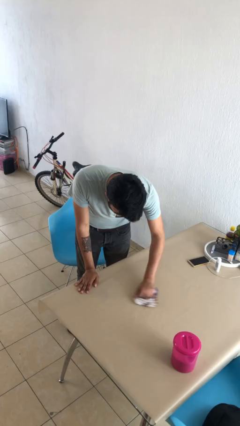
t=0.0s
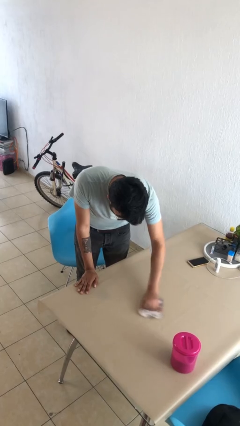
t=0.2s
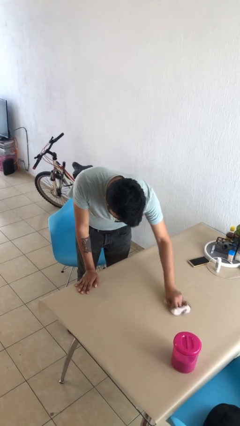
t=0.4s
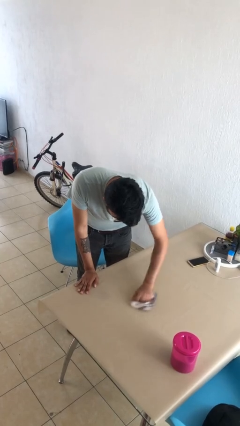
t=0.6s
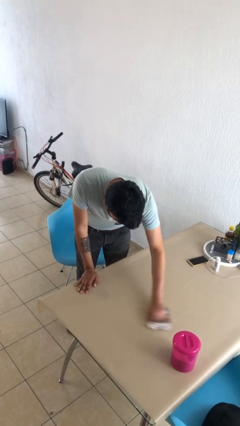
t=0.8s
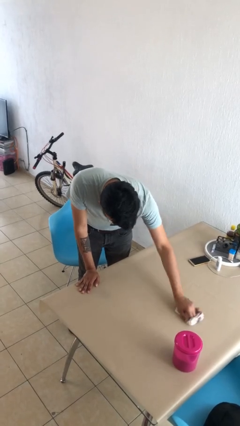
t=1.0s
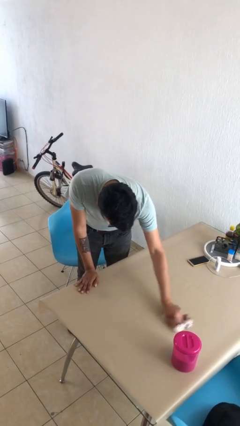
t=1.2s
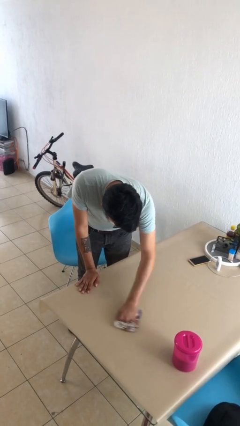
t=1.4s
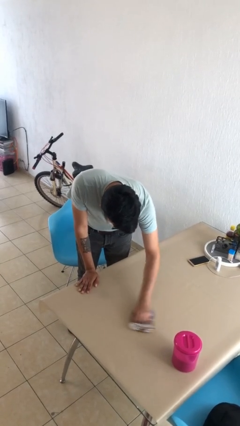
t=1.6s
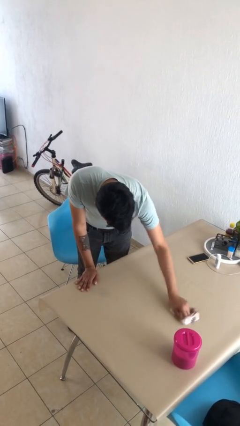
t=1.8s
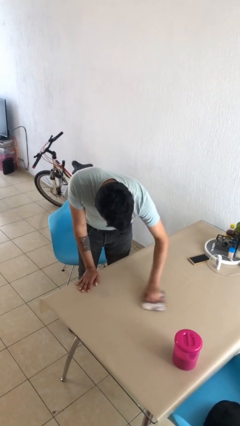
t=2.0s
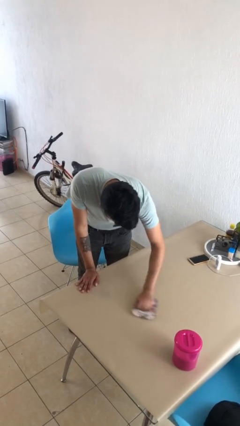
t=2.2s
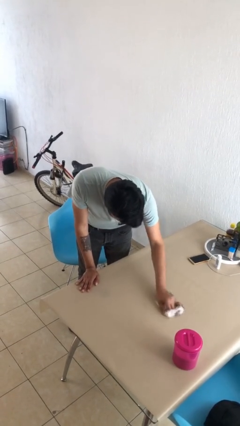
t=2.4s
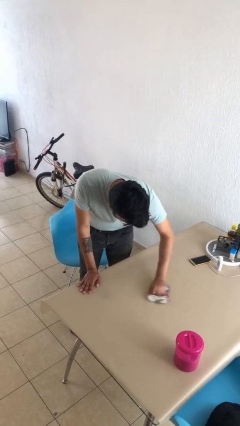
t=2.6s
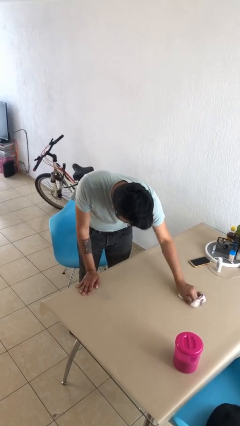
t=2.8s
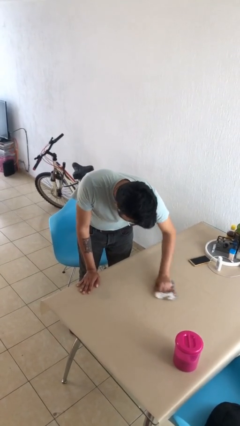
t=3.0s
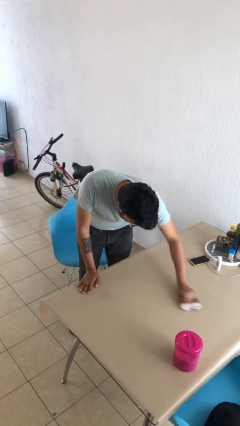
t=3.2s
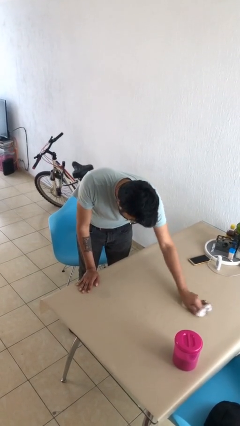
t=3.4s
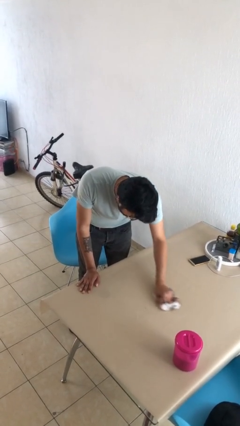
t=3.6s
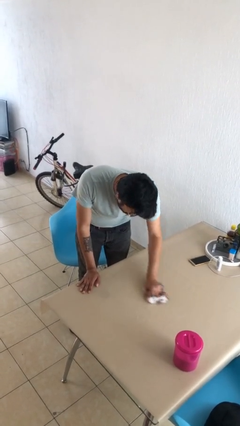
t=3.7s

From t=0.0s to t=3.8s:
person cleans table with rag

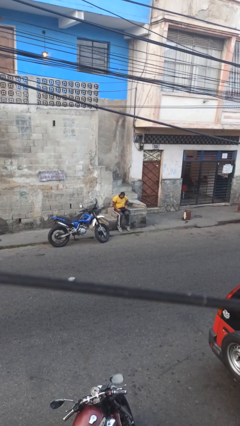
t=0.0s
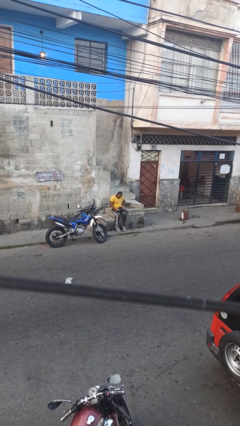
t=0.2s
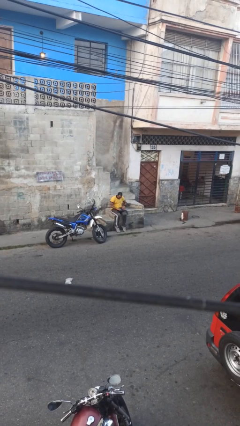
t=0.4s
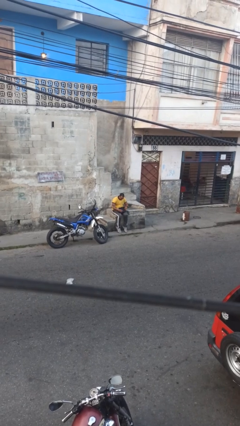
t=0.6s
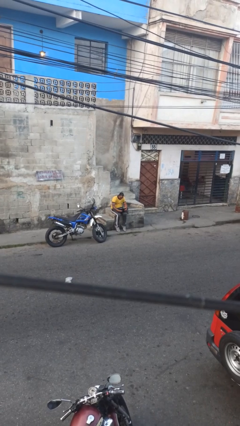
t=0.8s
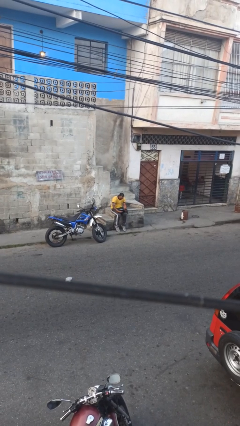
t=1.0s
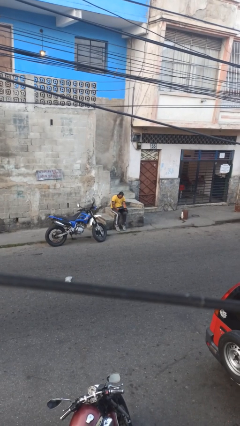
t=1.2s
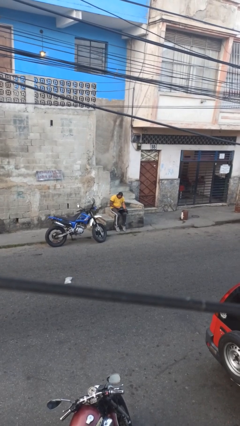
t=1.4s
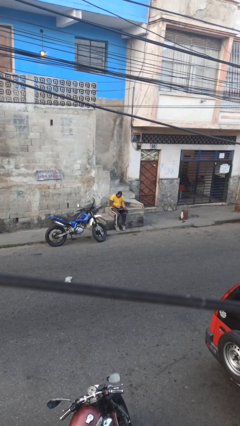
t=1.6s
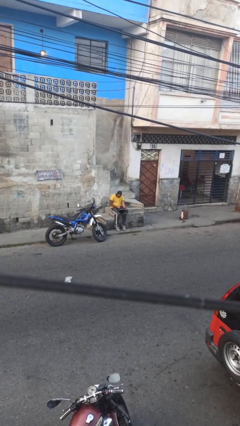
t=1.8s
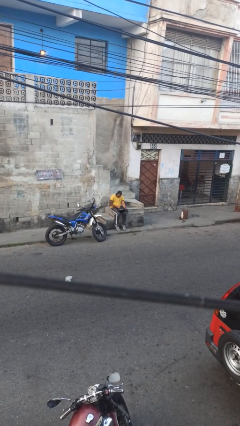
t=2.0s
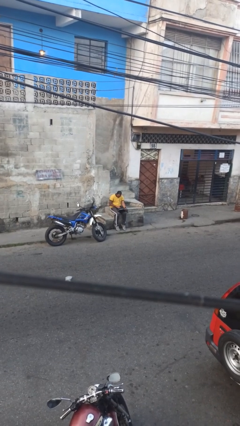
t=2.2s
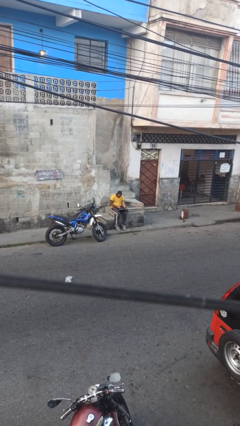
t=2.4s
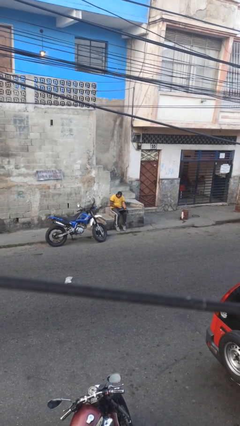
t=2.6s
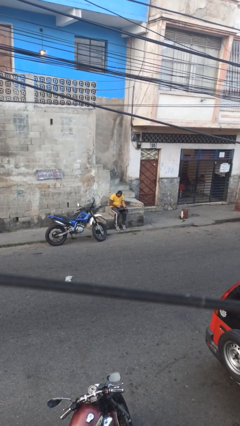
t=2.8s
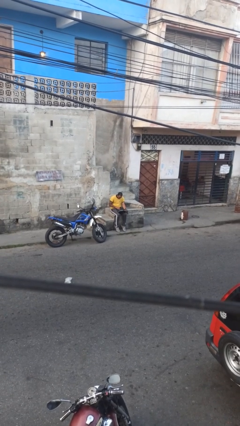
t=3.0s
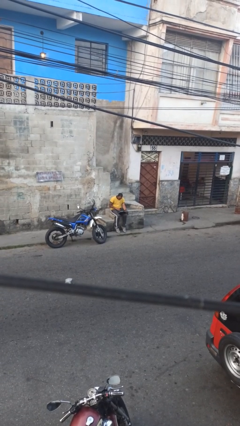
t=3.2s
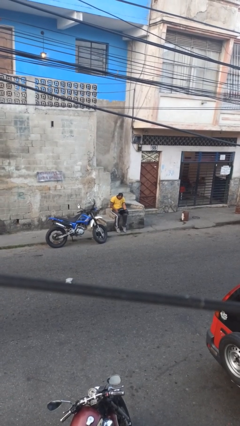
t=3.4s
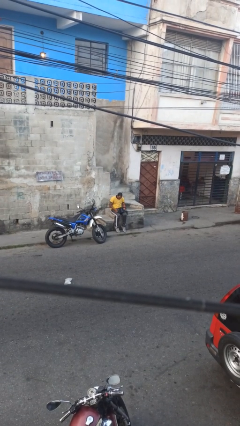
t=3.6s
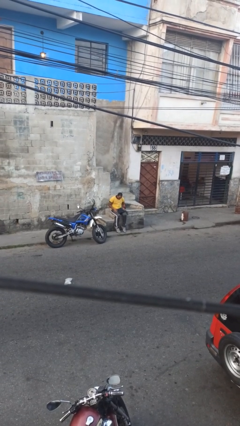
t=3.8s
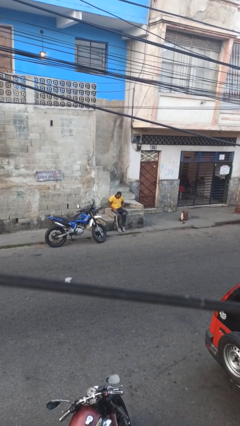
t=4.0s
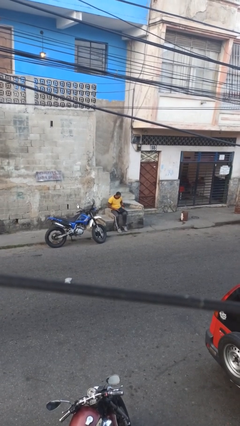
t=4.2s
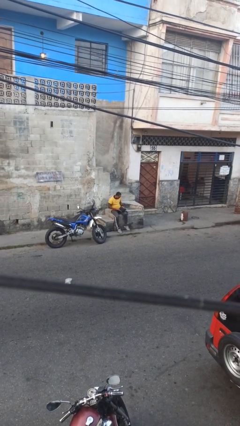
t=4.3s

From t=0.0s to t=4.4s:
person interacts with laptop

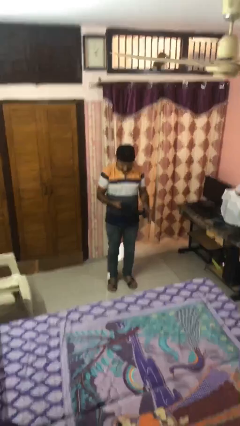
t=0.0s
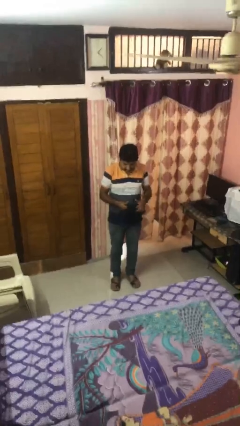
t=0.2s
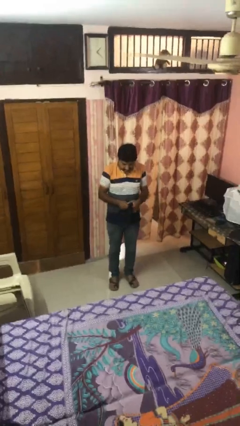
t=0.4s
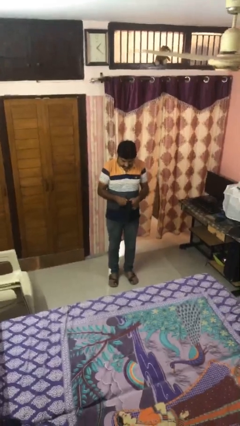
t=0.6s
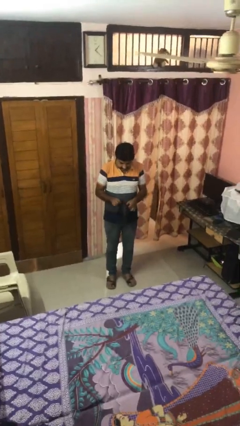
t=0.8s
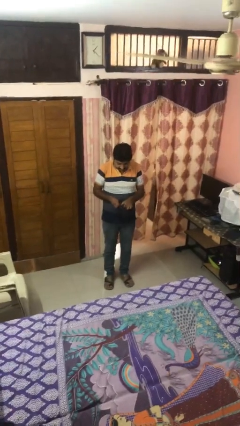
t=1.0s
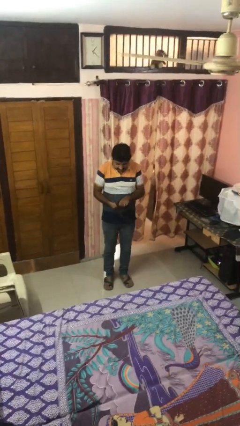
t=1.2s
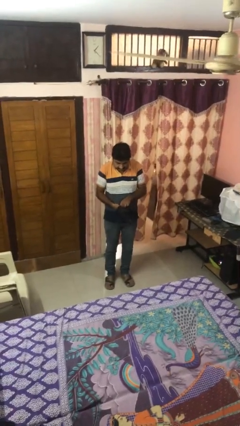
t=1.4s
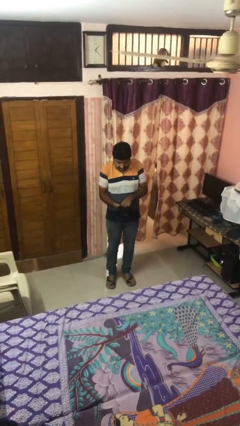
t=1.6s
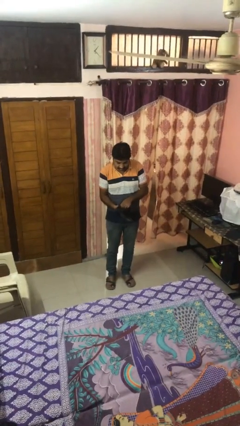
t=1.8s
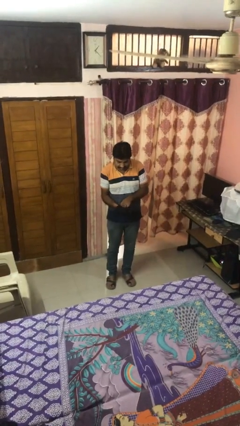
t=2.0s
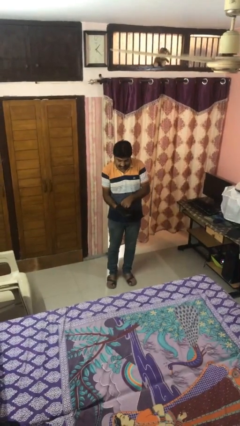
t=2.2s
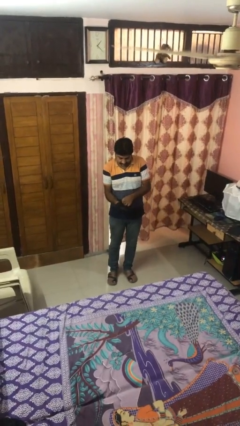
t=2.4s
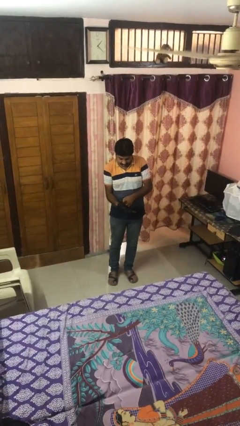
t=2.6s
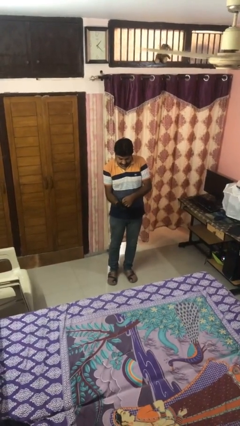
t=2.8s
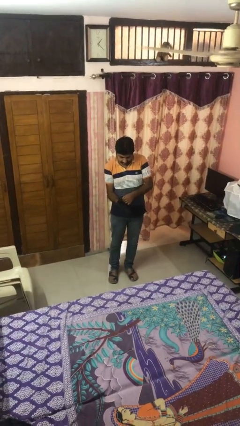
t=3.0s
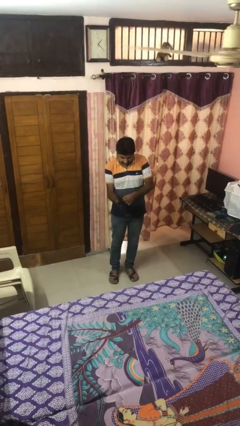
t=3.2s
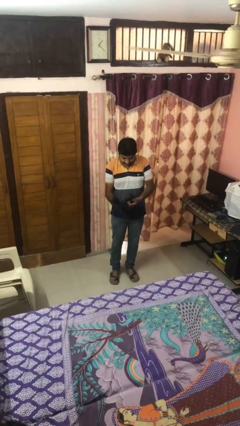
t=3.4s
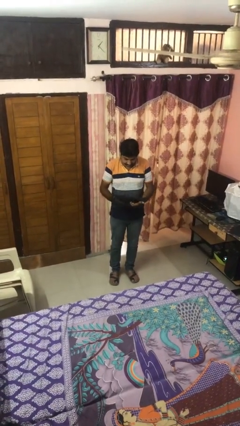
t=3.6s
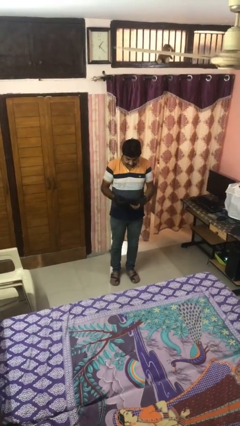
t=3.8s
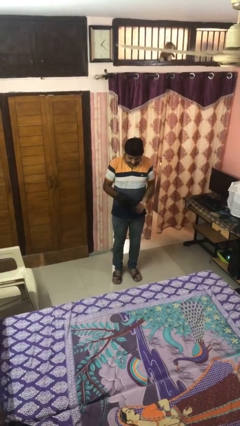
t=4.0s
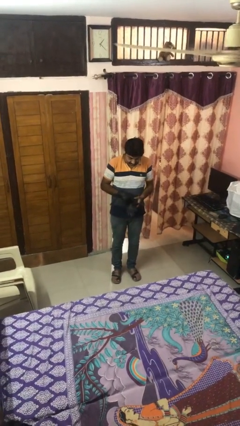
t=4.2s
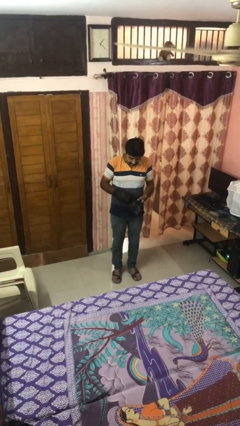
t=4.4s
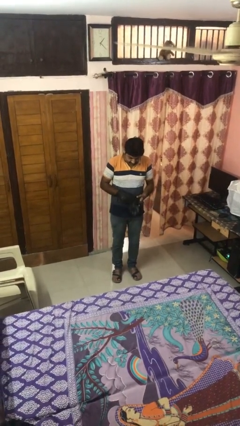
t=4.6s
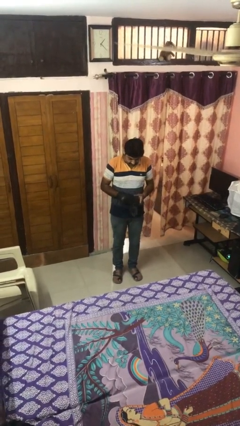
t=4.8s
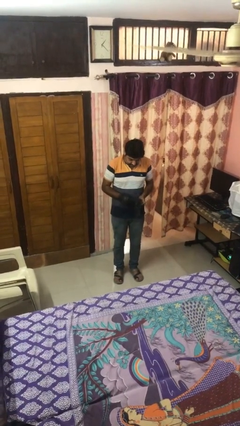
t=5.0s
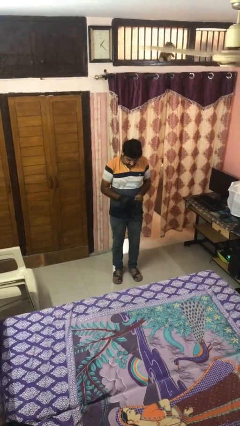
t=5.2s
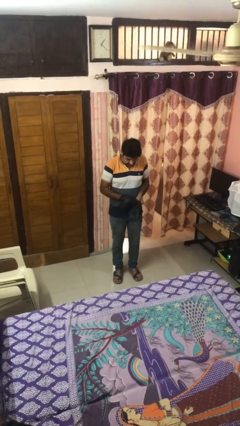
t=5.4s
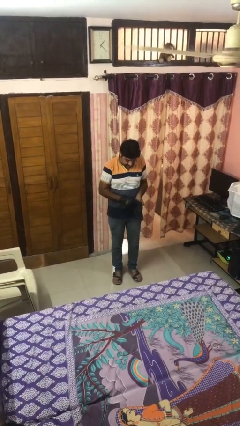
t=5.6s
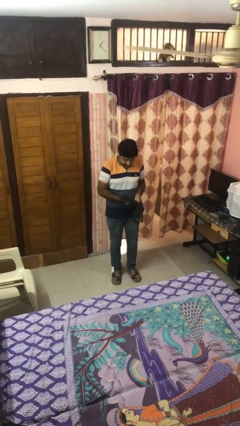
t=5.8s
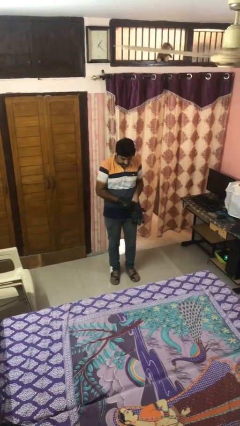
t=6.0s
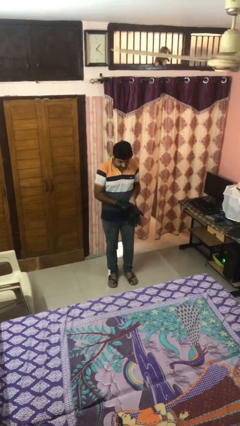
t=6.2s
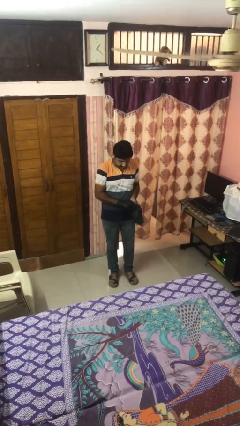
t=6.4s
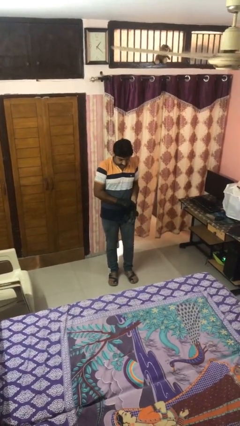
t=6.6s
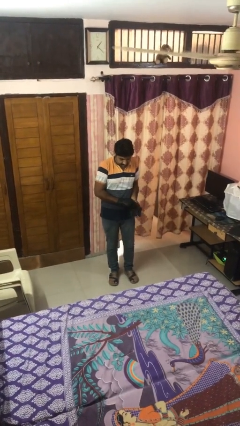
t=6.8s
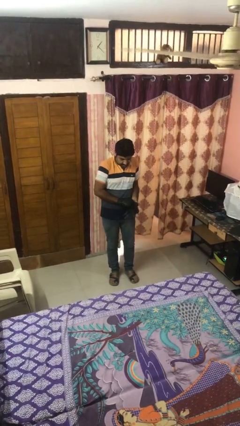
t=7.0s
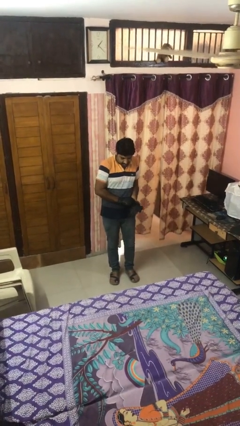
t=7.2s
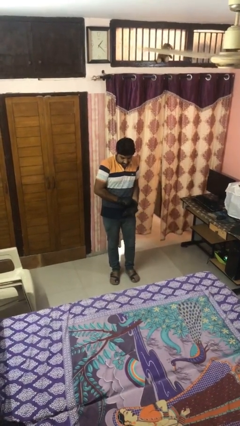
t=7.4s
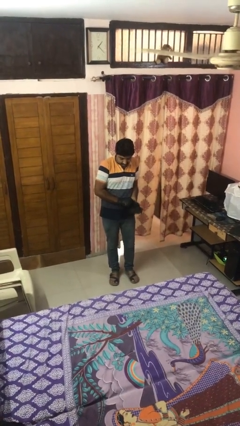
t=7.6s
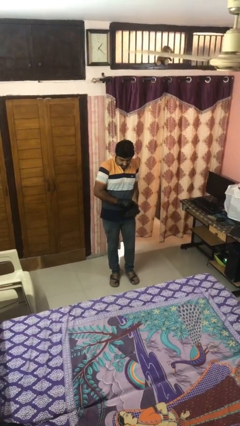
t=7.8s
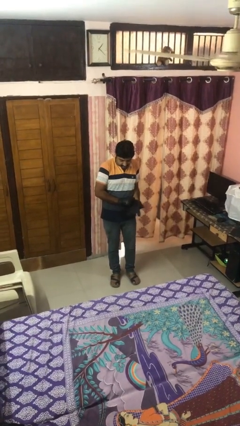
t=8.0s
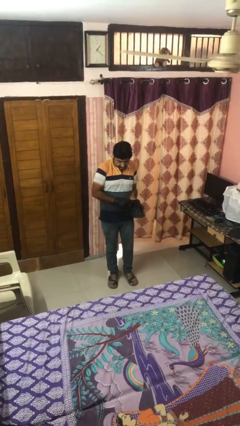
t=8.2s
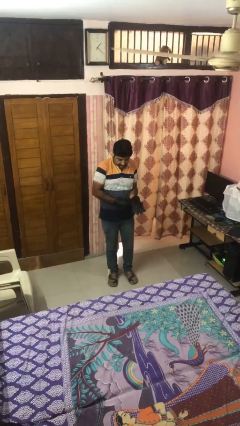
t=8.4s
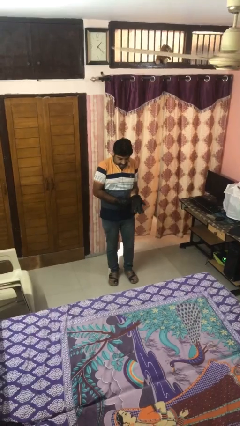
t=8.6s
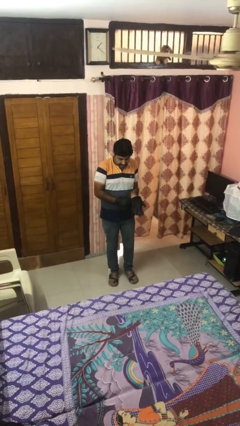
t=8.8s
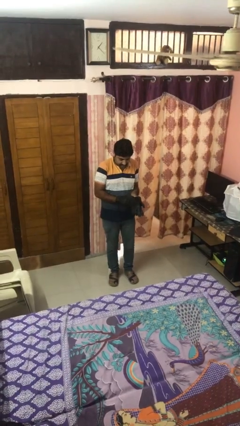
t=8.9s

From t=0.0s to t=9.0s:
person puts on gloves

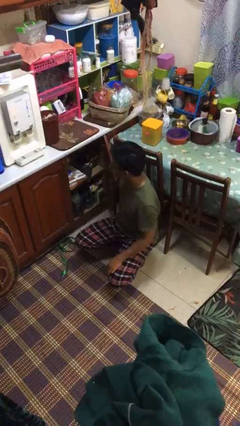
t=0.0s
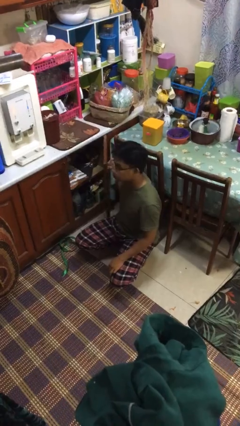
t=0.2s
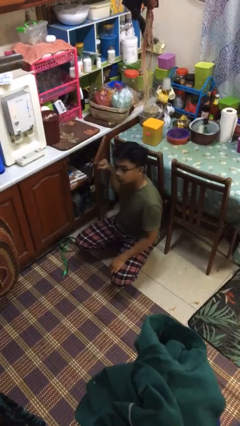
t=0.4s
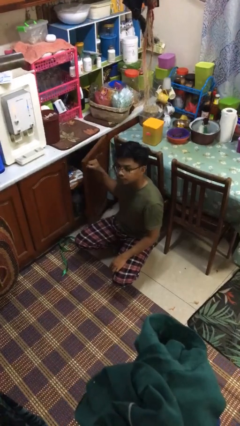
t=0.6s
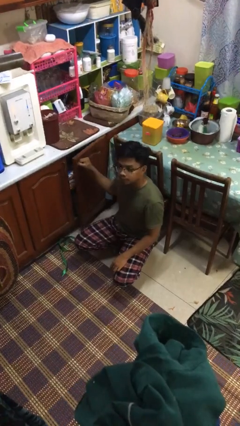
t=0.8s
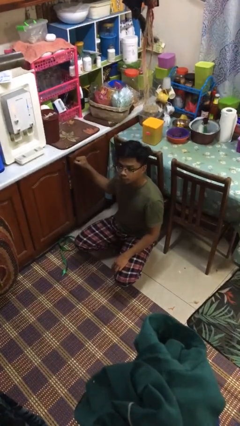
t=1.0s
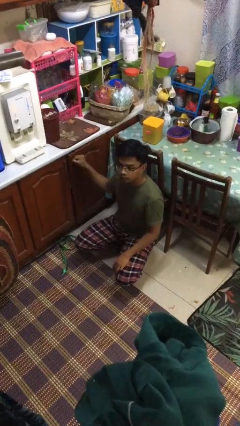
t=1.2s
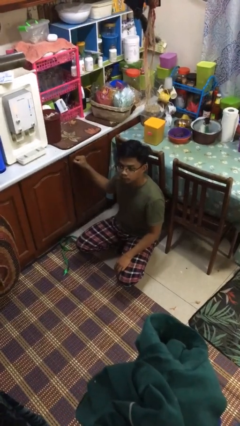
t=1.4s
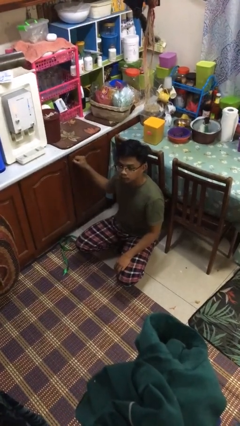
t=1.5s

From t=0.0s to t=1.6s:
person closes kitchen drawer
